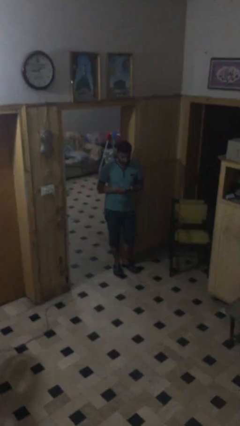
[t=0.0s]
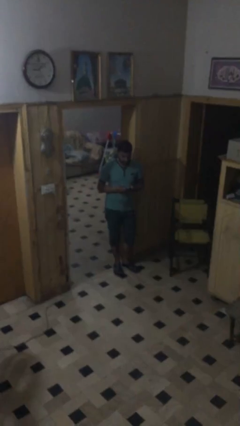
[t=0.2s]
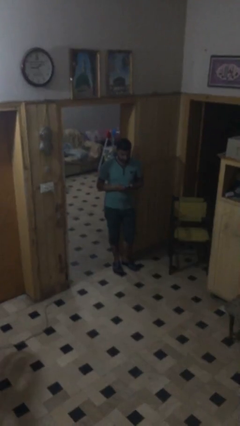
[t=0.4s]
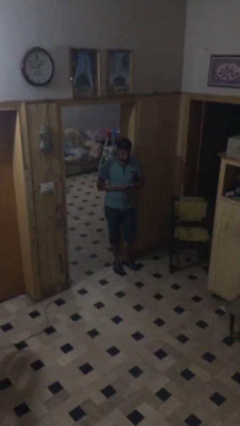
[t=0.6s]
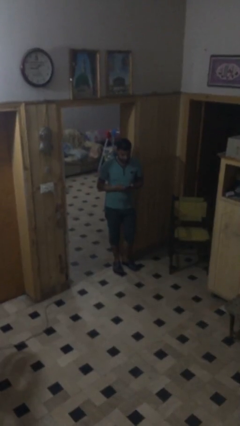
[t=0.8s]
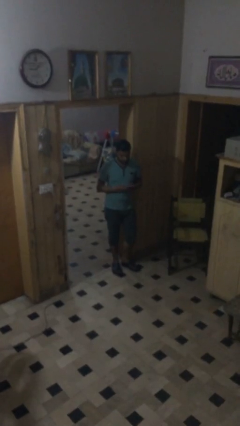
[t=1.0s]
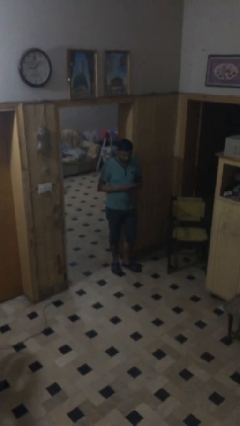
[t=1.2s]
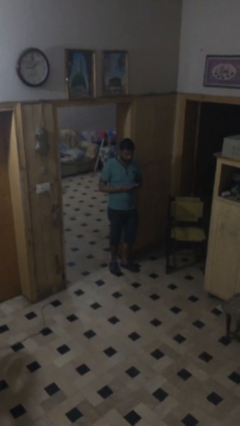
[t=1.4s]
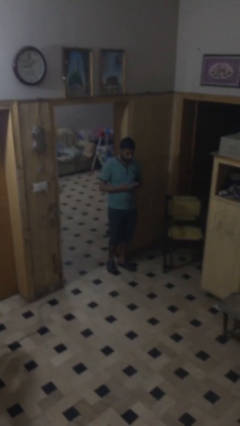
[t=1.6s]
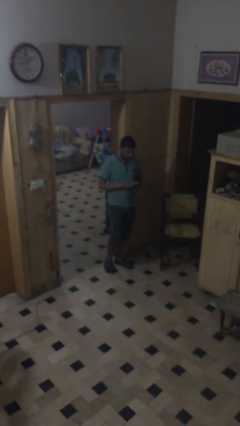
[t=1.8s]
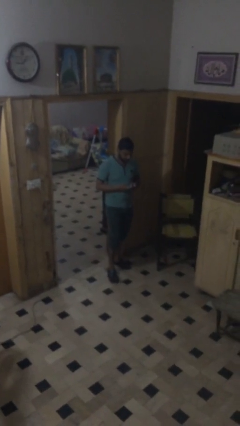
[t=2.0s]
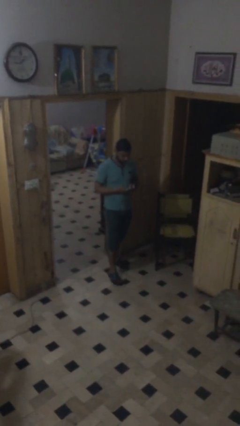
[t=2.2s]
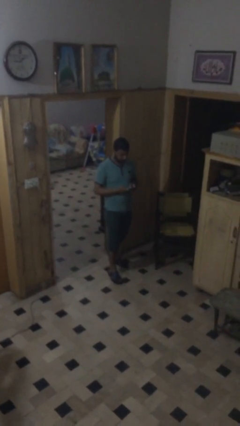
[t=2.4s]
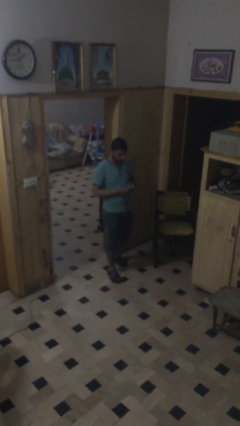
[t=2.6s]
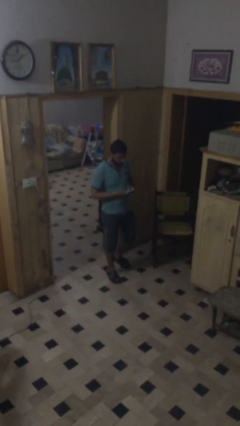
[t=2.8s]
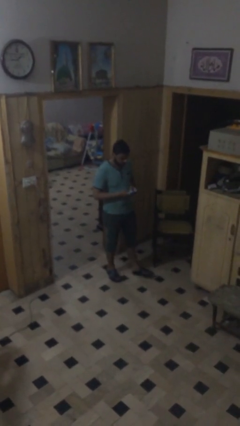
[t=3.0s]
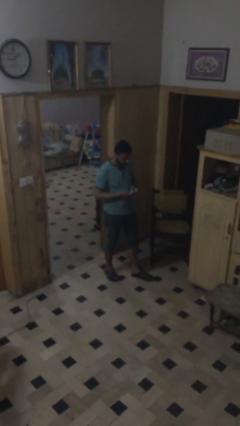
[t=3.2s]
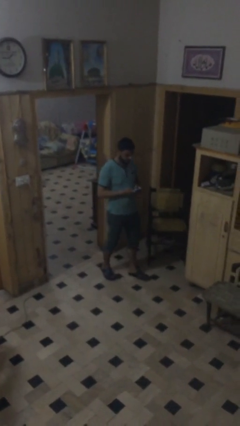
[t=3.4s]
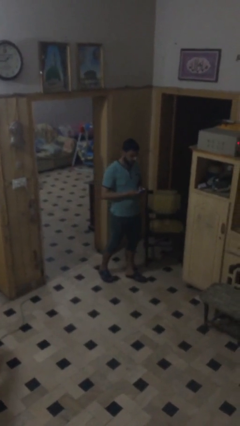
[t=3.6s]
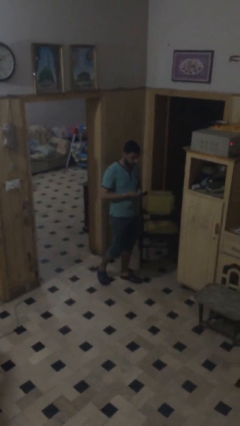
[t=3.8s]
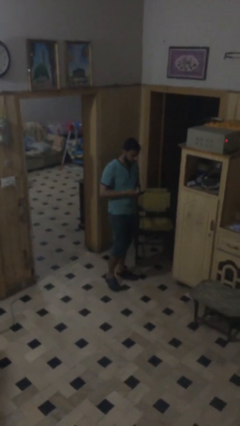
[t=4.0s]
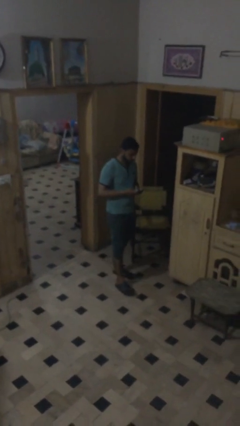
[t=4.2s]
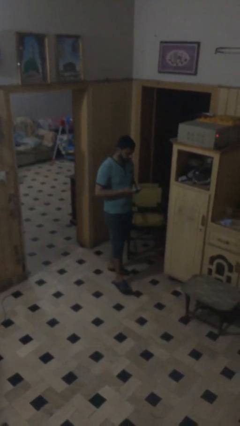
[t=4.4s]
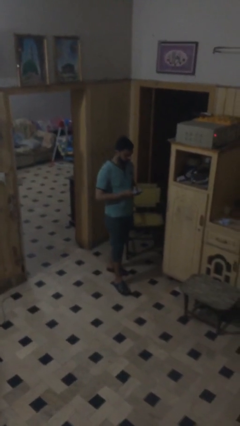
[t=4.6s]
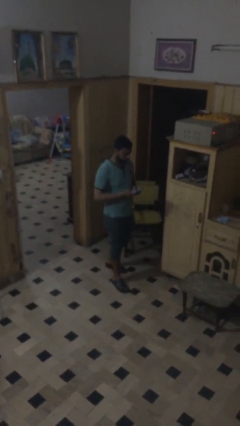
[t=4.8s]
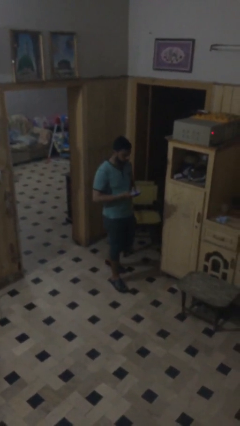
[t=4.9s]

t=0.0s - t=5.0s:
person texts on phone

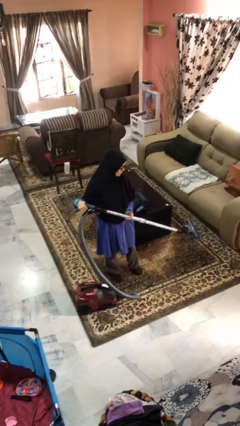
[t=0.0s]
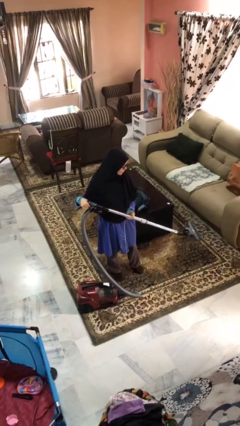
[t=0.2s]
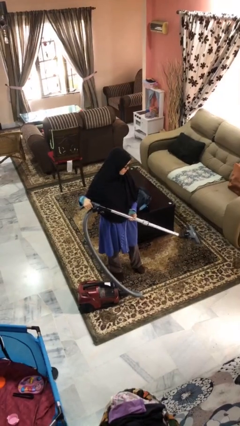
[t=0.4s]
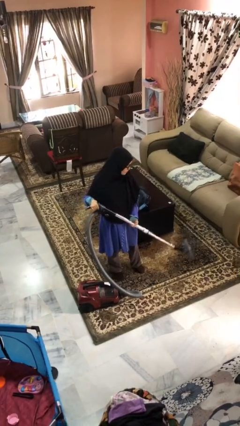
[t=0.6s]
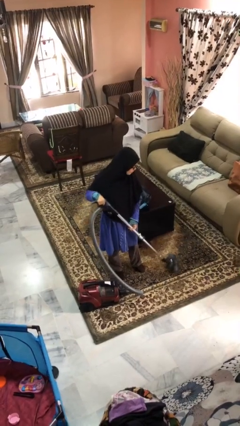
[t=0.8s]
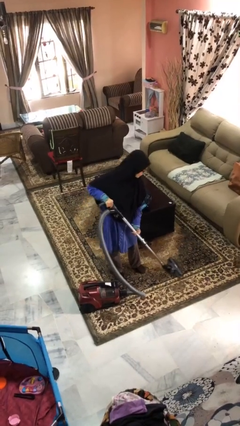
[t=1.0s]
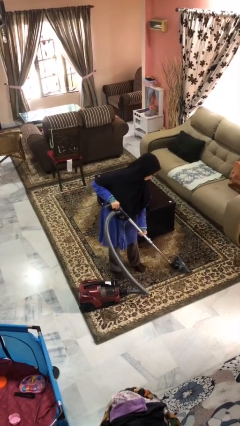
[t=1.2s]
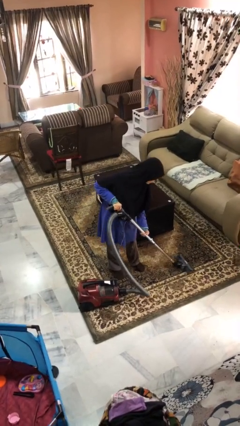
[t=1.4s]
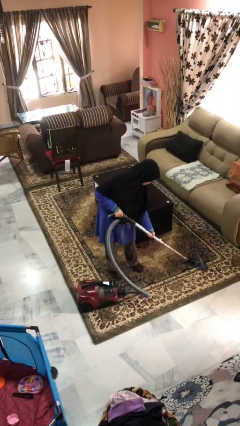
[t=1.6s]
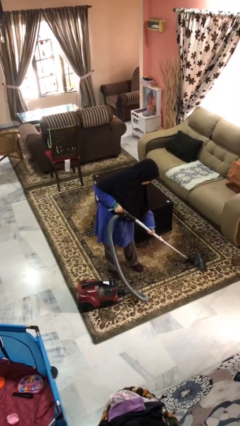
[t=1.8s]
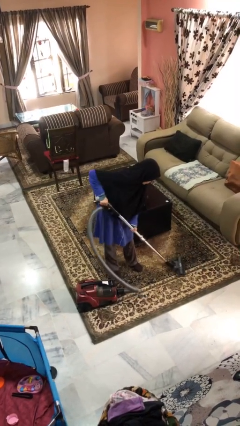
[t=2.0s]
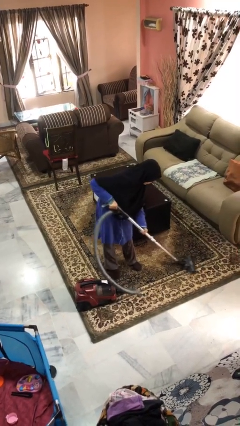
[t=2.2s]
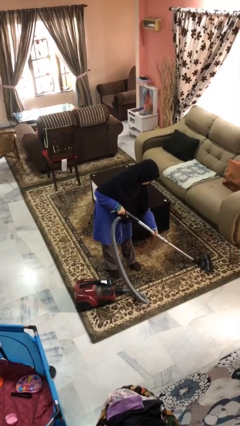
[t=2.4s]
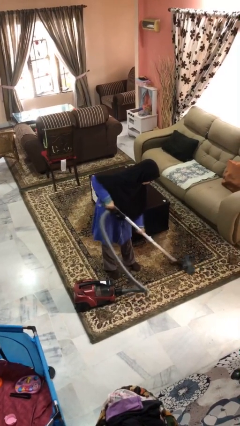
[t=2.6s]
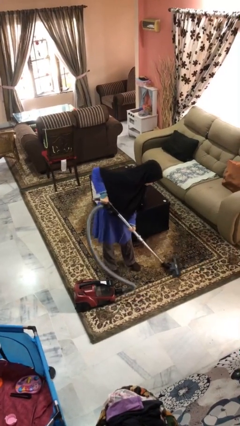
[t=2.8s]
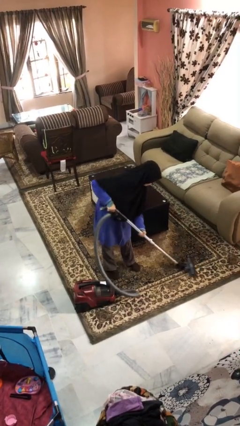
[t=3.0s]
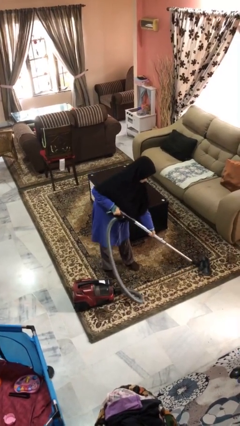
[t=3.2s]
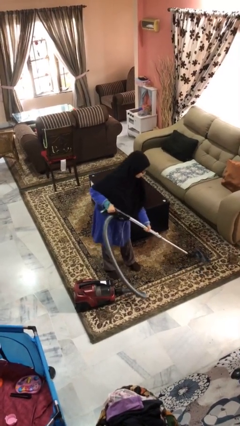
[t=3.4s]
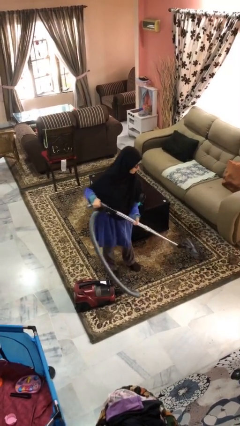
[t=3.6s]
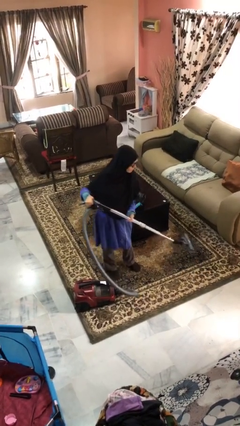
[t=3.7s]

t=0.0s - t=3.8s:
person vacuums carpet

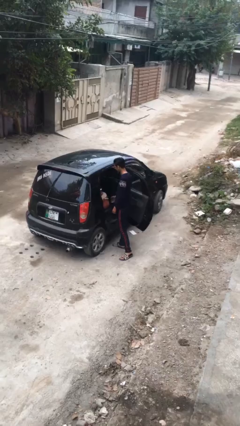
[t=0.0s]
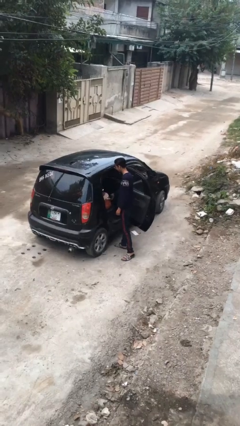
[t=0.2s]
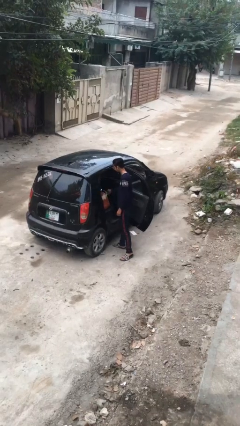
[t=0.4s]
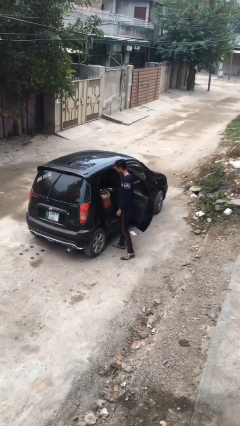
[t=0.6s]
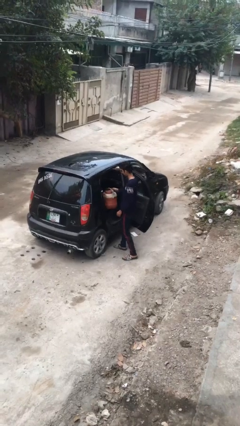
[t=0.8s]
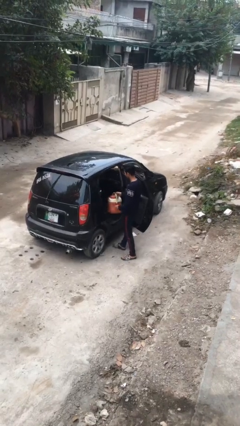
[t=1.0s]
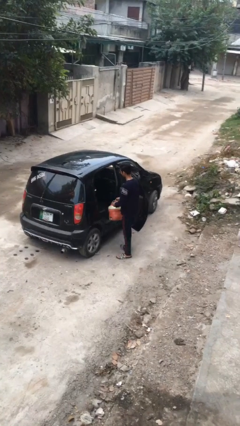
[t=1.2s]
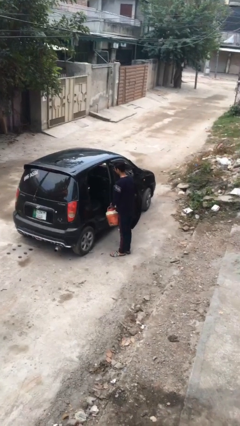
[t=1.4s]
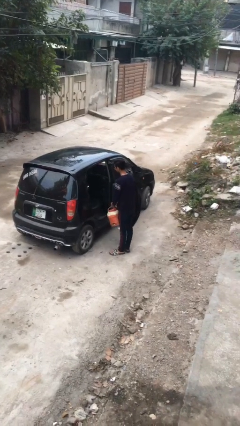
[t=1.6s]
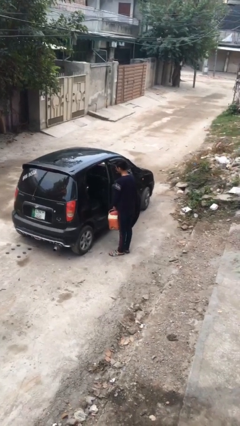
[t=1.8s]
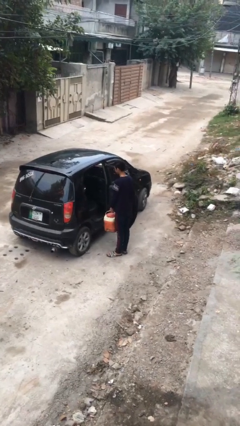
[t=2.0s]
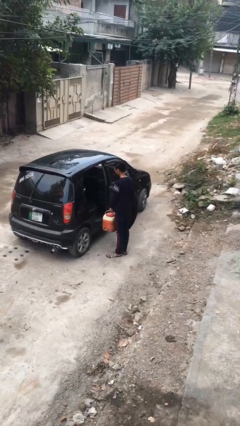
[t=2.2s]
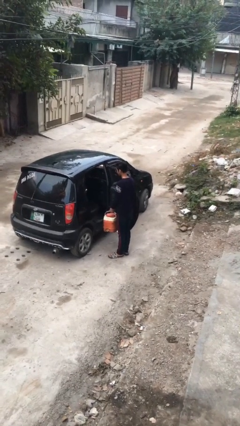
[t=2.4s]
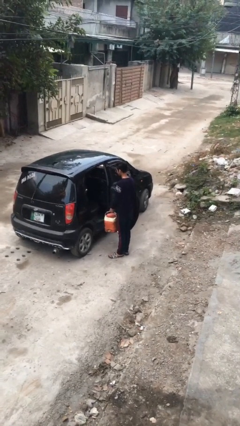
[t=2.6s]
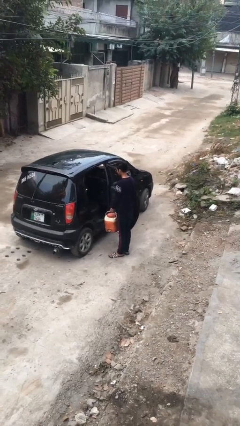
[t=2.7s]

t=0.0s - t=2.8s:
person unloads car

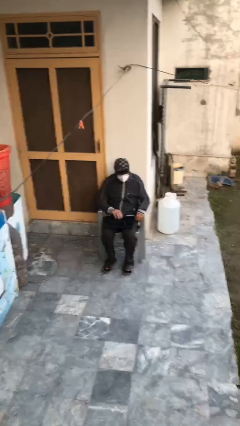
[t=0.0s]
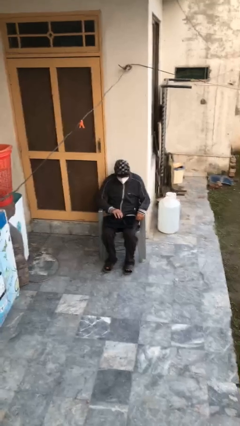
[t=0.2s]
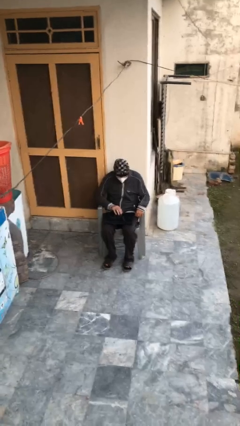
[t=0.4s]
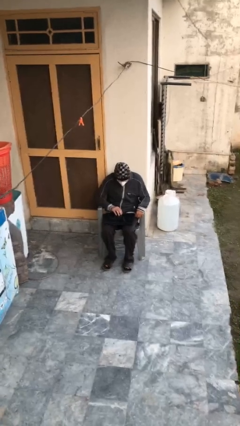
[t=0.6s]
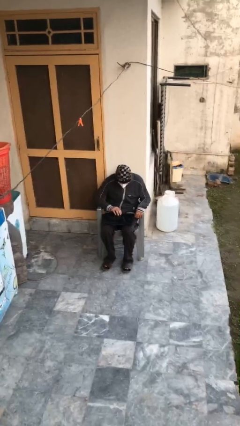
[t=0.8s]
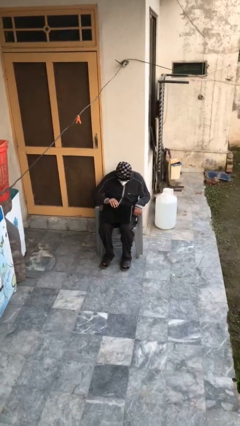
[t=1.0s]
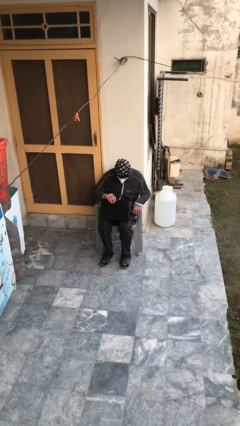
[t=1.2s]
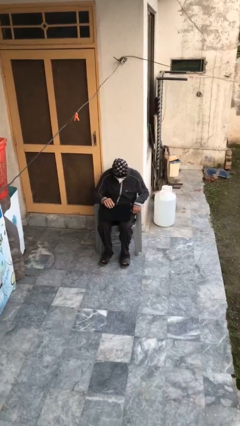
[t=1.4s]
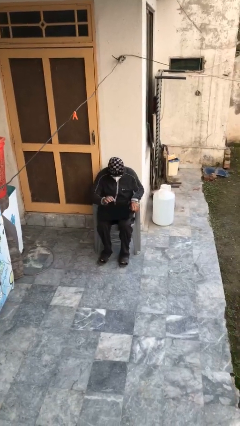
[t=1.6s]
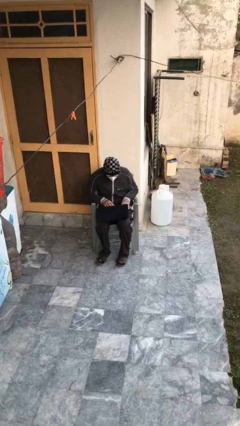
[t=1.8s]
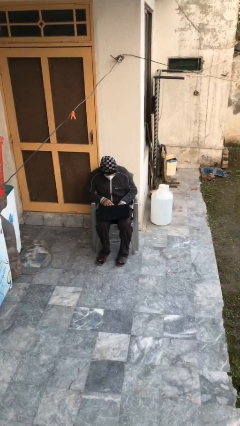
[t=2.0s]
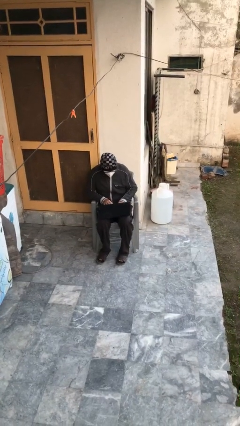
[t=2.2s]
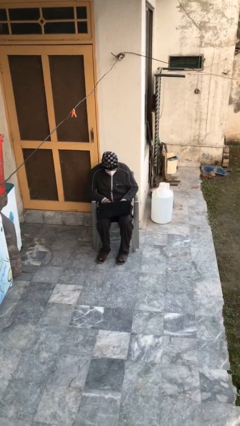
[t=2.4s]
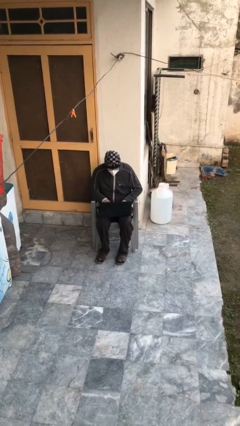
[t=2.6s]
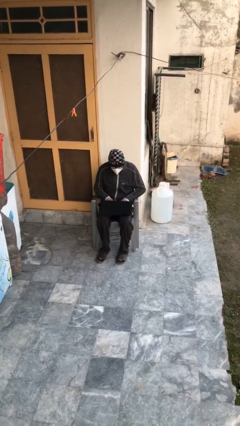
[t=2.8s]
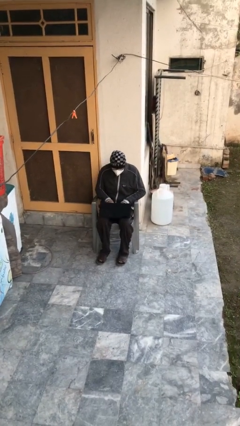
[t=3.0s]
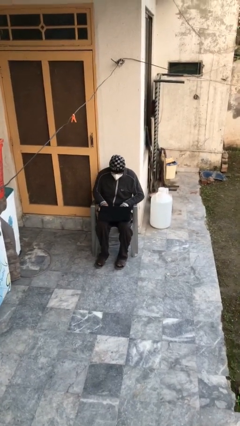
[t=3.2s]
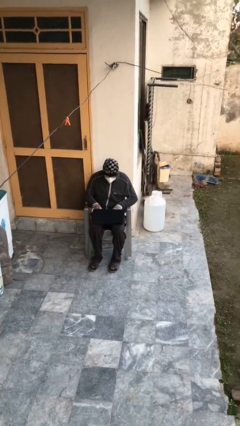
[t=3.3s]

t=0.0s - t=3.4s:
person interacts with laptop

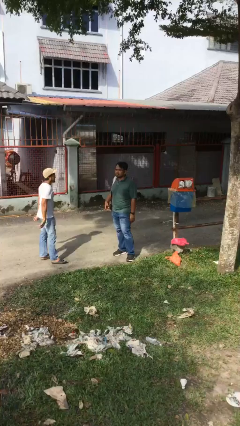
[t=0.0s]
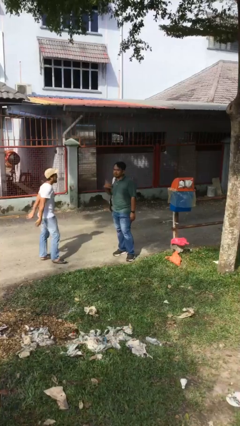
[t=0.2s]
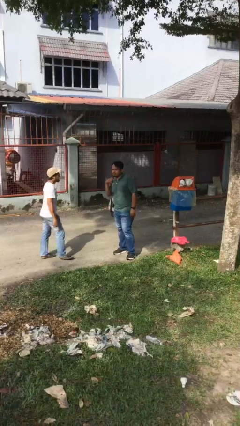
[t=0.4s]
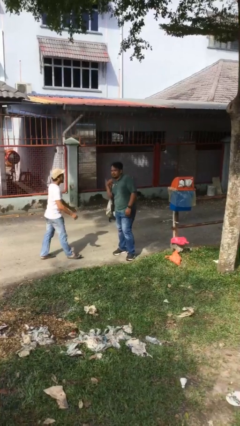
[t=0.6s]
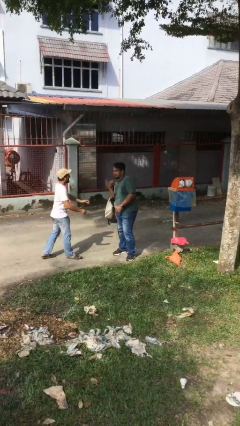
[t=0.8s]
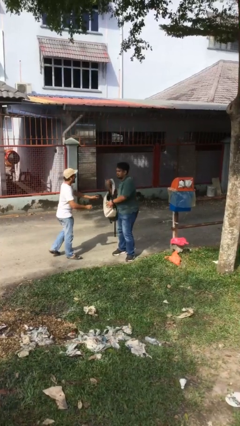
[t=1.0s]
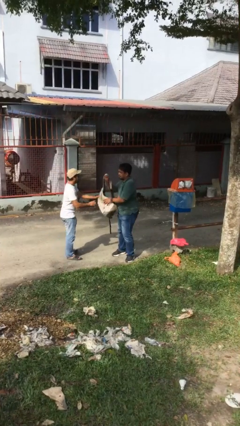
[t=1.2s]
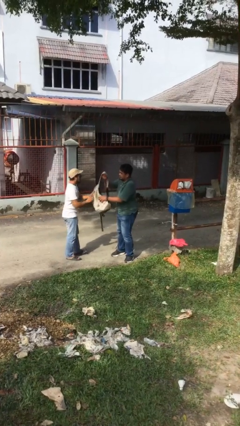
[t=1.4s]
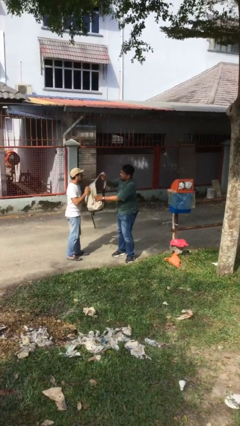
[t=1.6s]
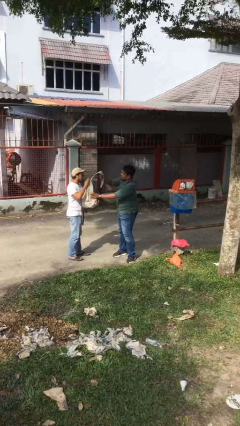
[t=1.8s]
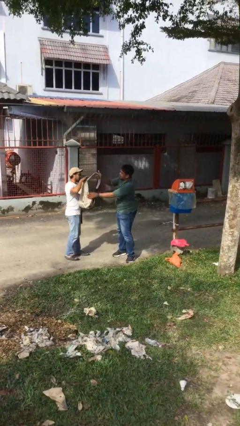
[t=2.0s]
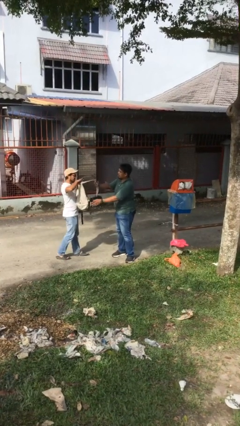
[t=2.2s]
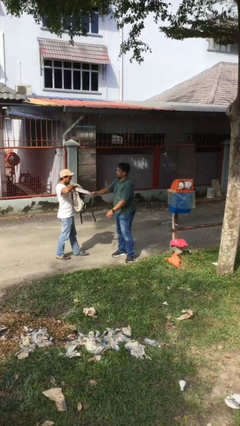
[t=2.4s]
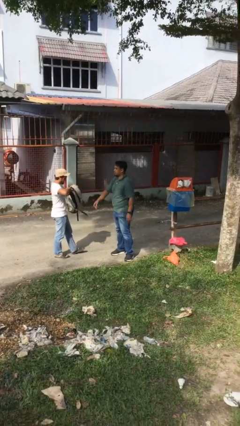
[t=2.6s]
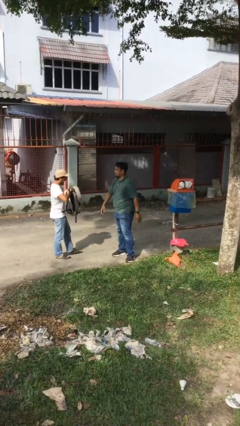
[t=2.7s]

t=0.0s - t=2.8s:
person transfers object to person
